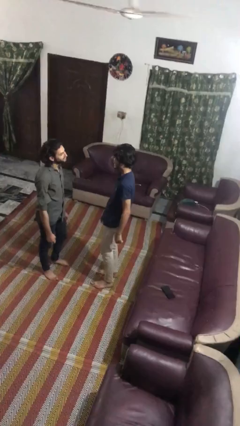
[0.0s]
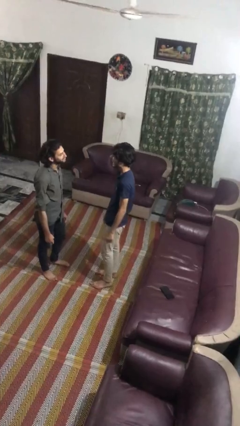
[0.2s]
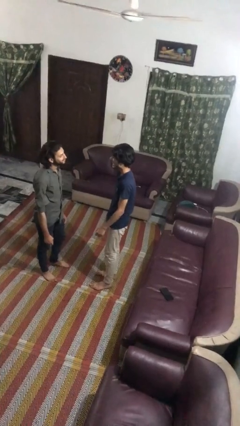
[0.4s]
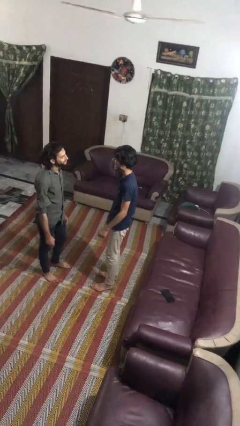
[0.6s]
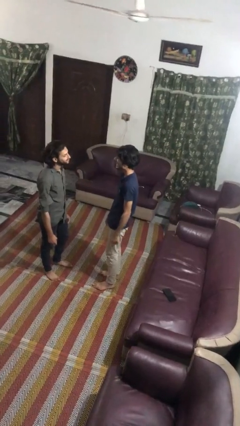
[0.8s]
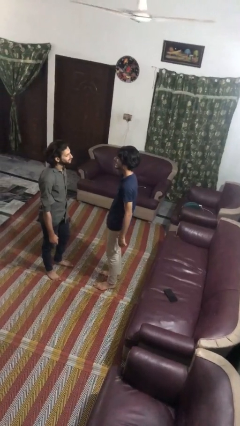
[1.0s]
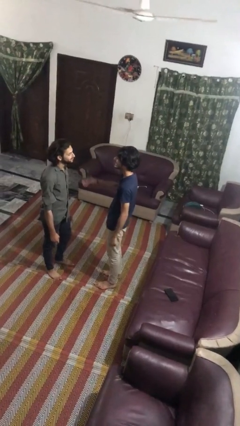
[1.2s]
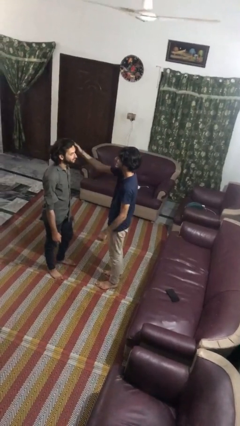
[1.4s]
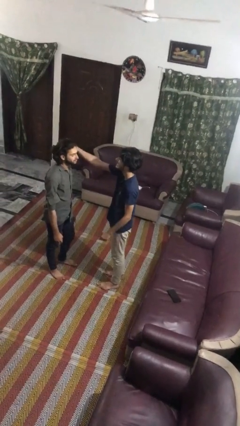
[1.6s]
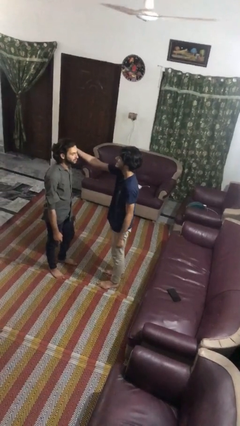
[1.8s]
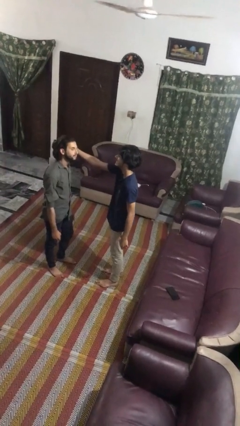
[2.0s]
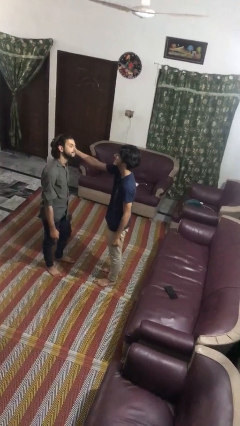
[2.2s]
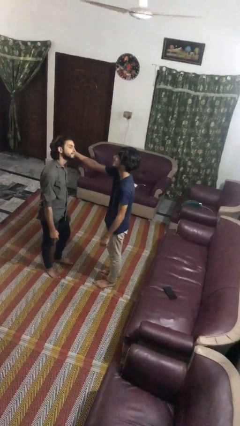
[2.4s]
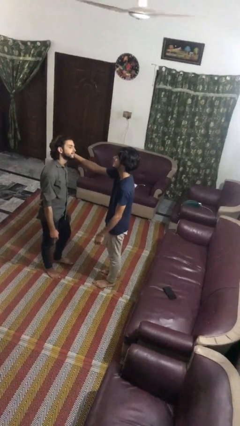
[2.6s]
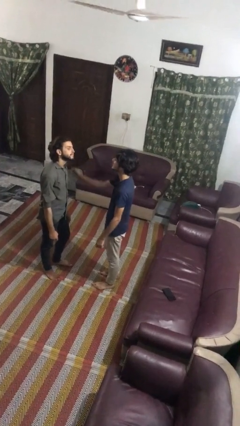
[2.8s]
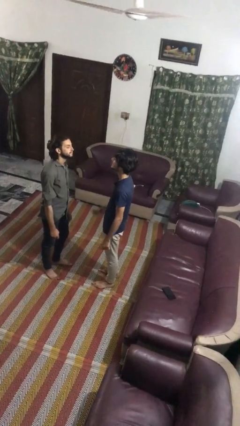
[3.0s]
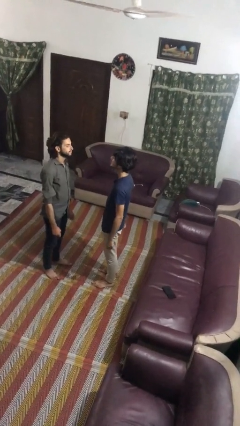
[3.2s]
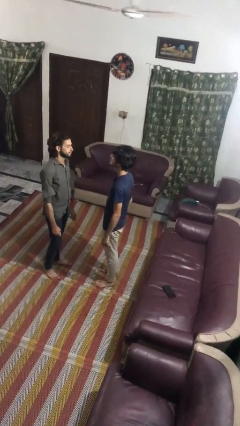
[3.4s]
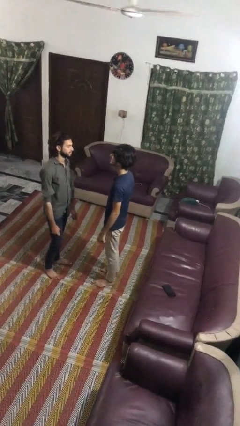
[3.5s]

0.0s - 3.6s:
person grabs person by hair

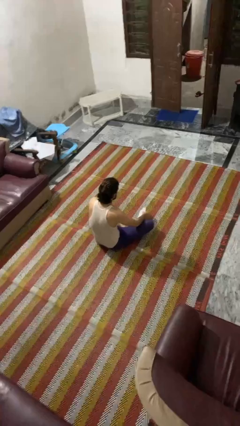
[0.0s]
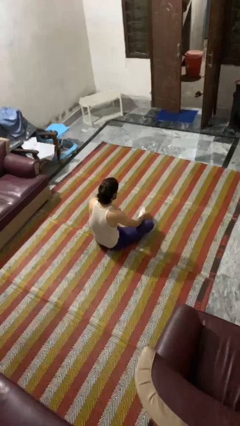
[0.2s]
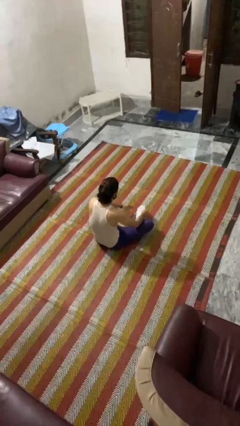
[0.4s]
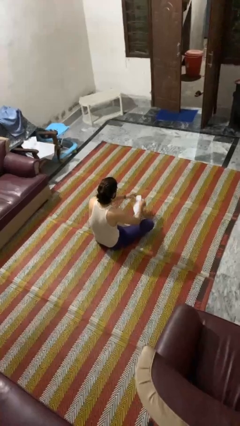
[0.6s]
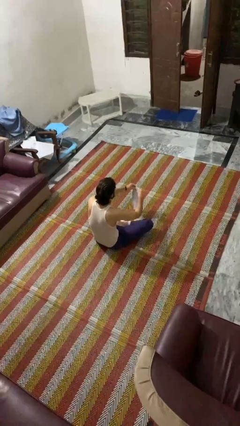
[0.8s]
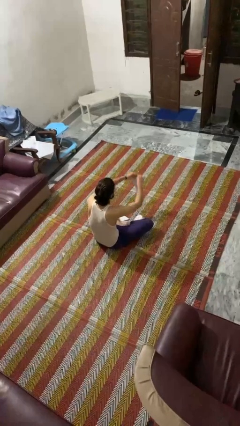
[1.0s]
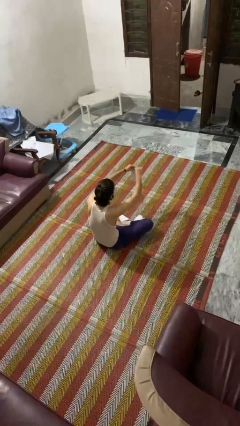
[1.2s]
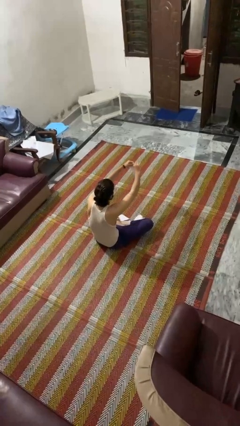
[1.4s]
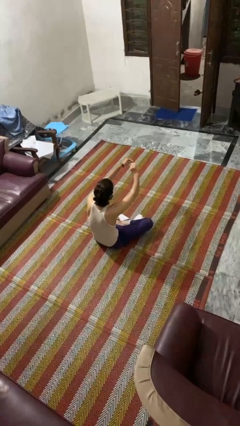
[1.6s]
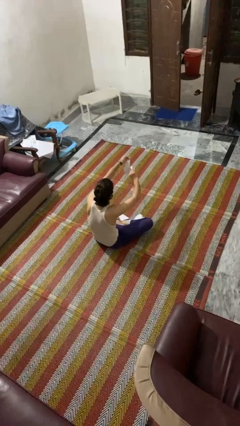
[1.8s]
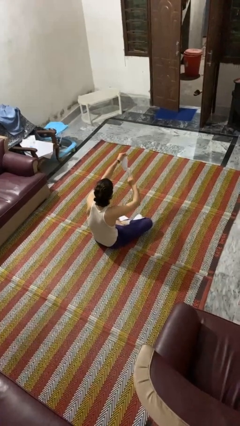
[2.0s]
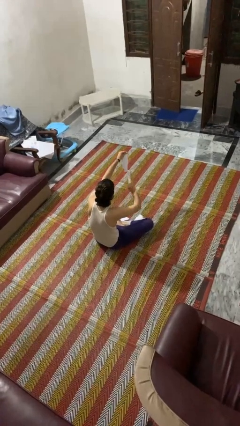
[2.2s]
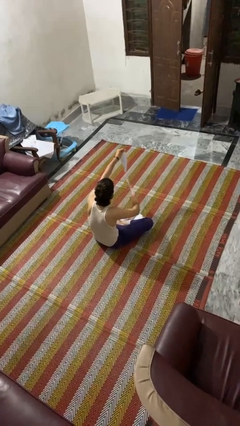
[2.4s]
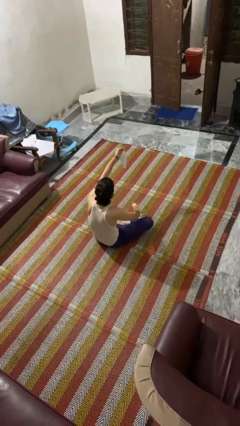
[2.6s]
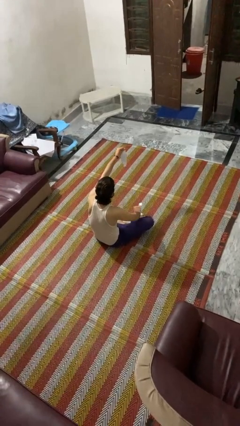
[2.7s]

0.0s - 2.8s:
person tears paper

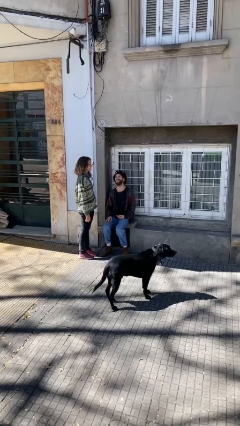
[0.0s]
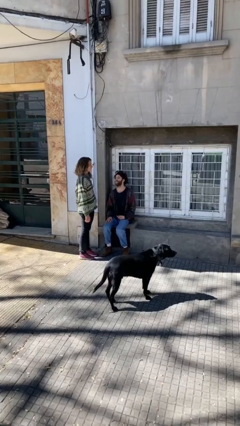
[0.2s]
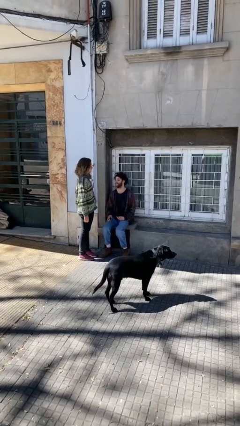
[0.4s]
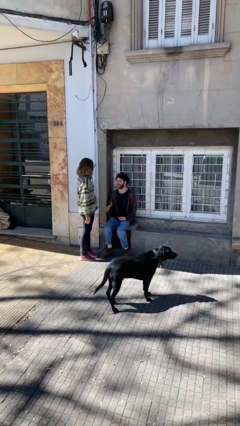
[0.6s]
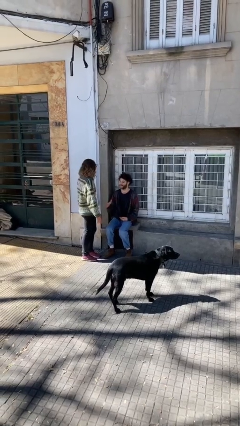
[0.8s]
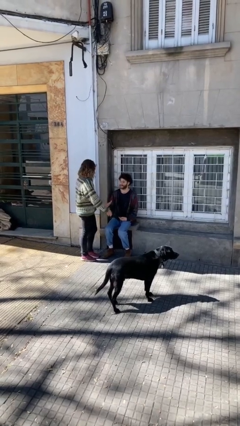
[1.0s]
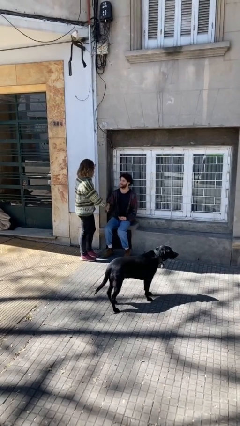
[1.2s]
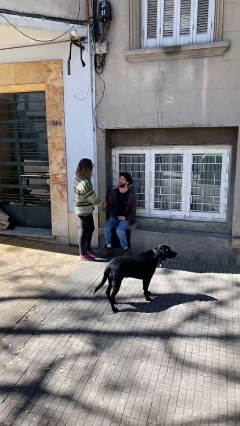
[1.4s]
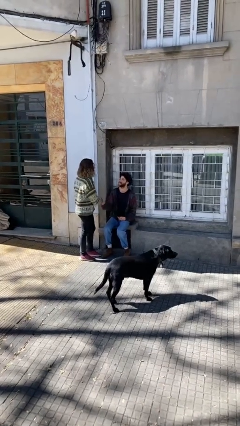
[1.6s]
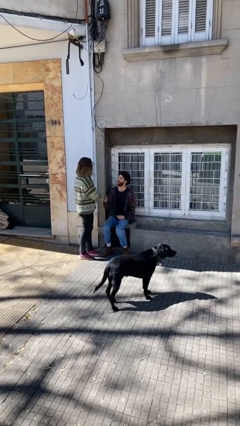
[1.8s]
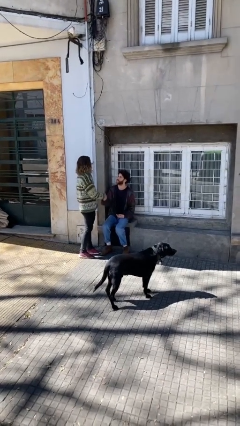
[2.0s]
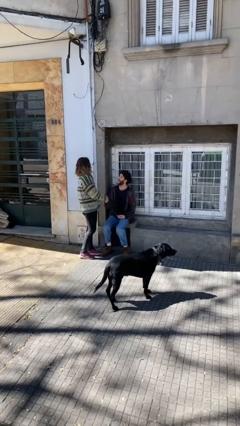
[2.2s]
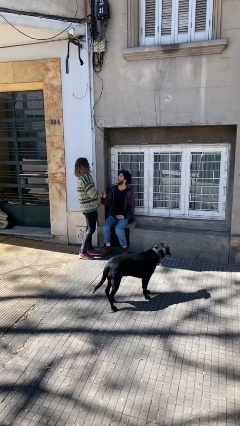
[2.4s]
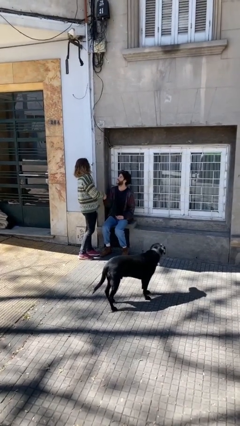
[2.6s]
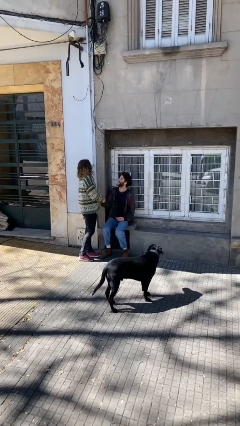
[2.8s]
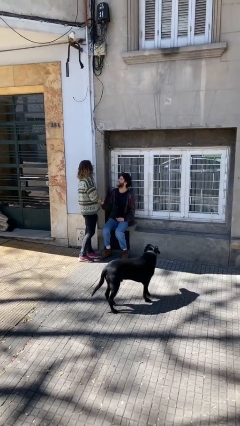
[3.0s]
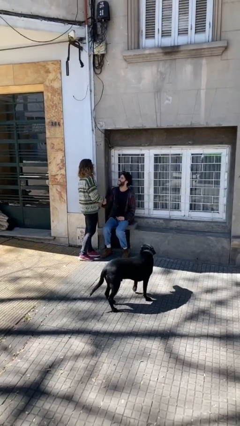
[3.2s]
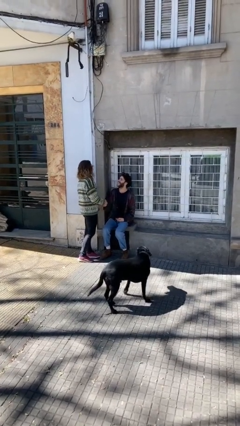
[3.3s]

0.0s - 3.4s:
person shakes hand

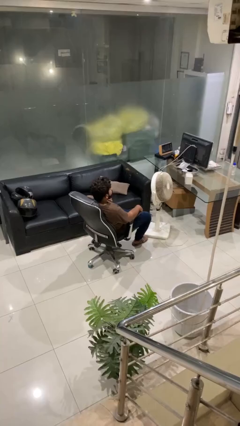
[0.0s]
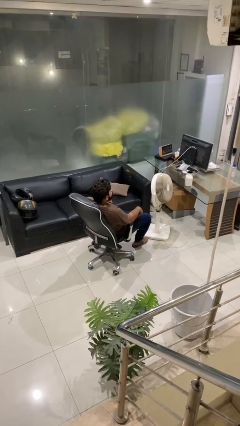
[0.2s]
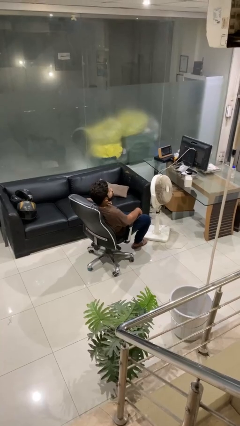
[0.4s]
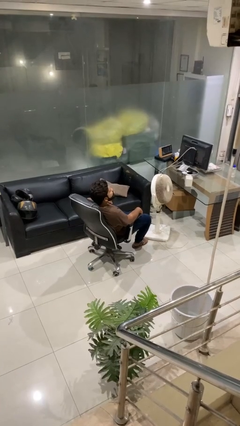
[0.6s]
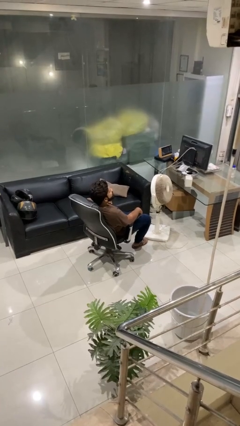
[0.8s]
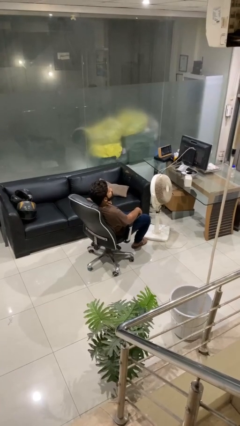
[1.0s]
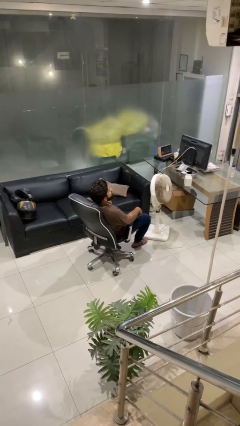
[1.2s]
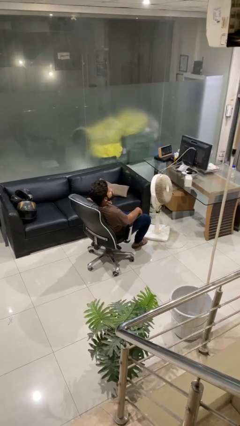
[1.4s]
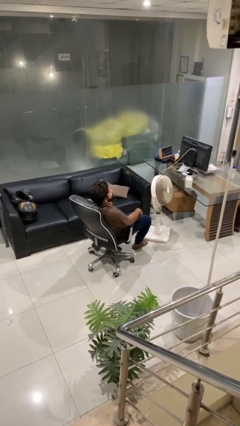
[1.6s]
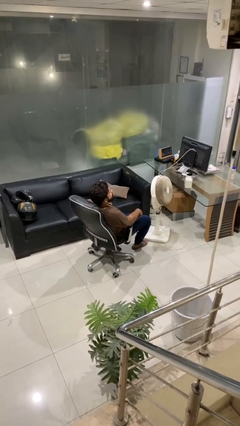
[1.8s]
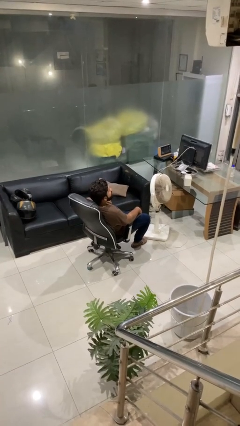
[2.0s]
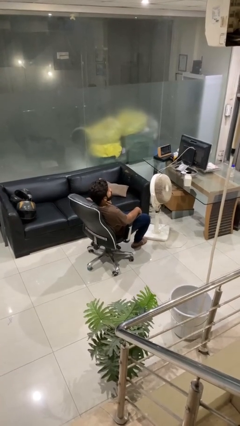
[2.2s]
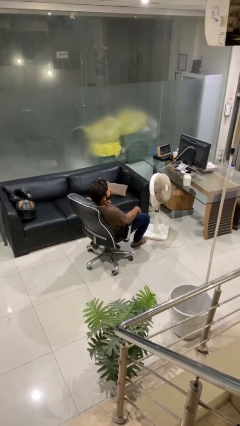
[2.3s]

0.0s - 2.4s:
person sticks out tongue

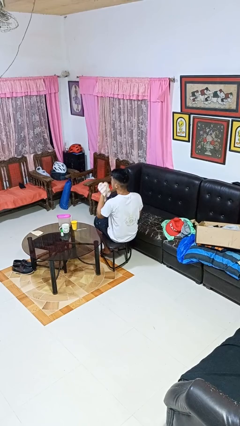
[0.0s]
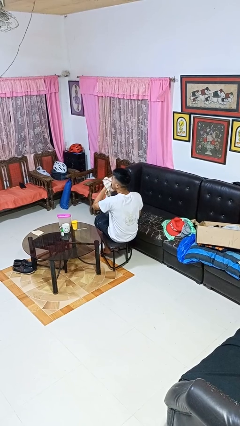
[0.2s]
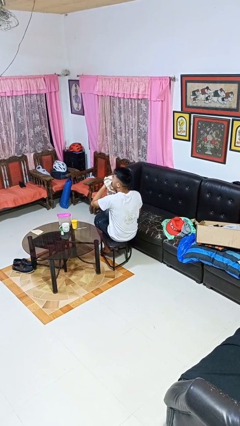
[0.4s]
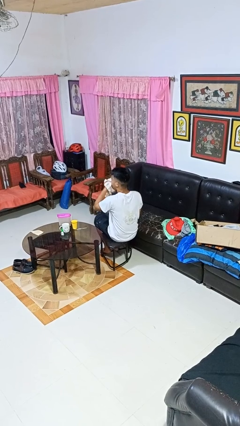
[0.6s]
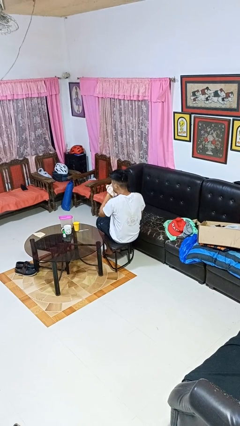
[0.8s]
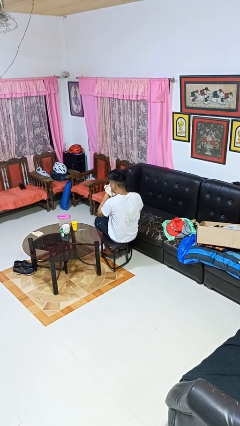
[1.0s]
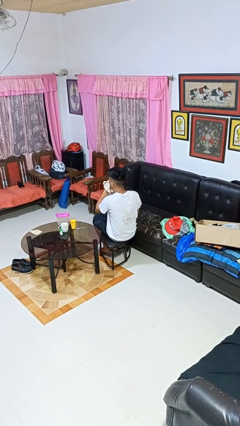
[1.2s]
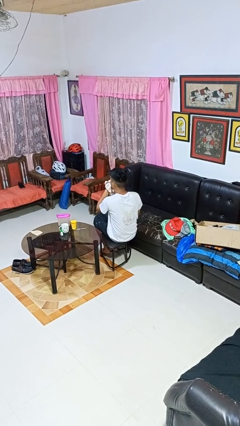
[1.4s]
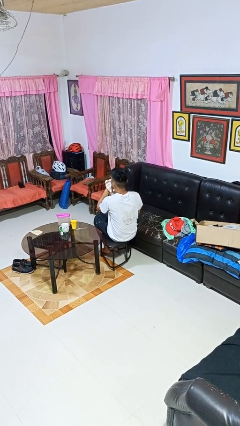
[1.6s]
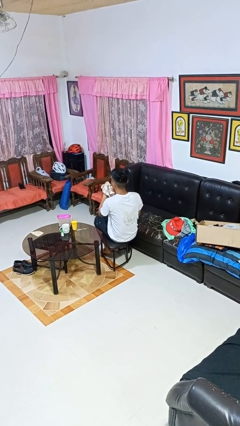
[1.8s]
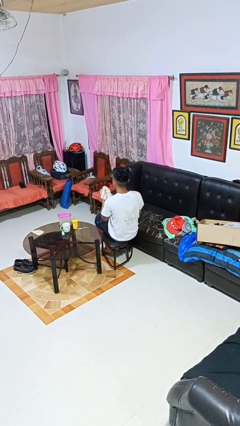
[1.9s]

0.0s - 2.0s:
person blows nose

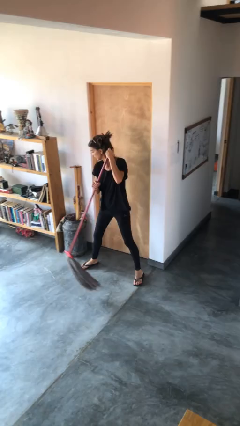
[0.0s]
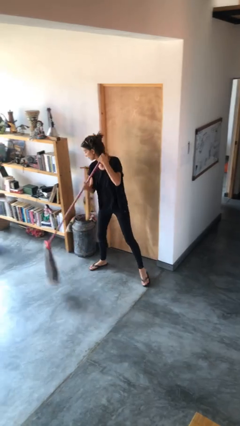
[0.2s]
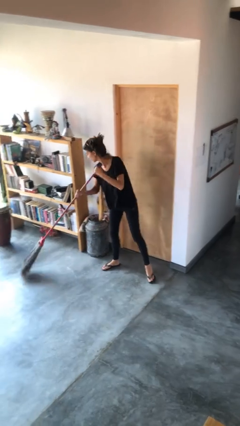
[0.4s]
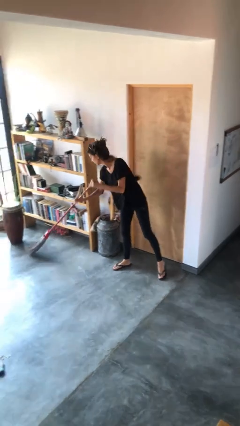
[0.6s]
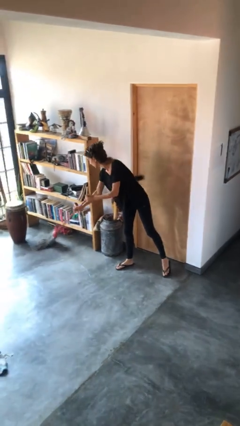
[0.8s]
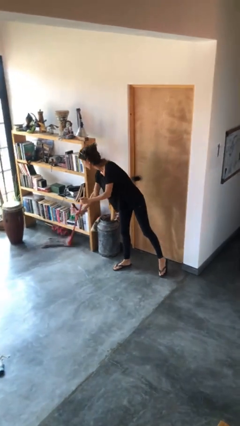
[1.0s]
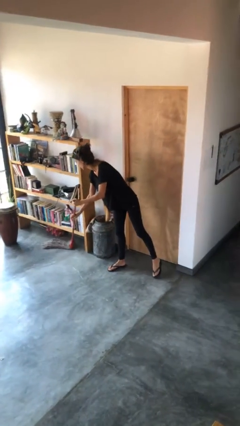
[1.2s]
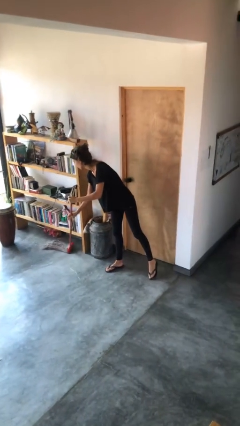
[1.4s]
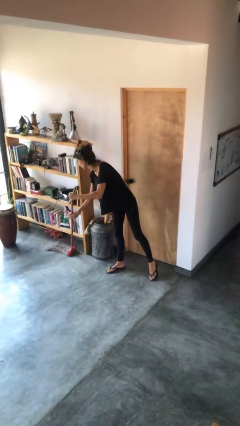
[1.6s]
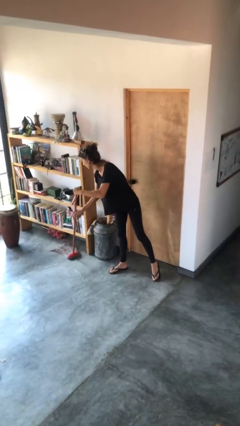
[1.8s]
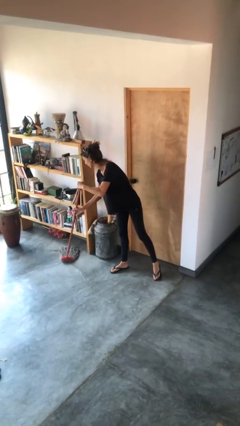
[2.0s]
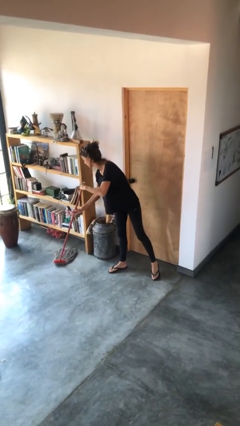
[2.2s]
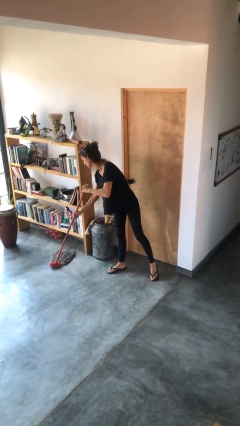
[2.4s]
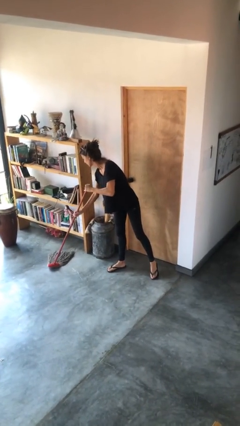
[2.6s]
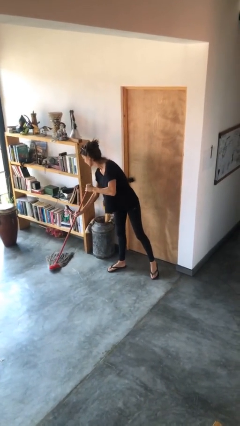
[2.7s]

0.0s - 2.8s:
person mops

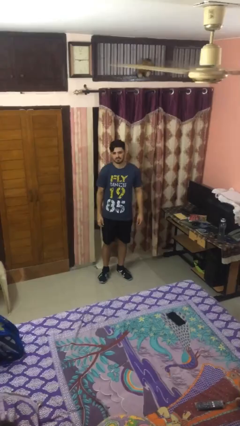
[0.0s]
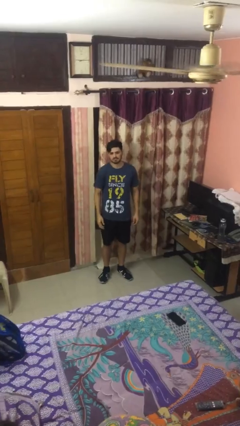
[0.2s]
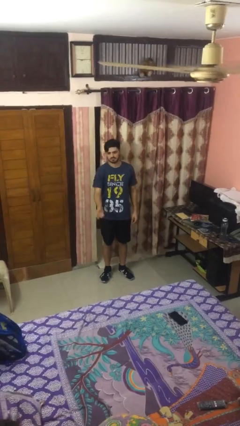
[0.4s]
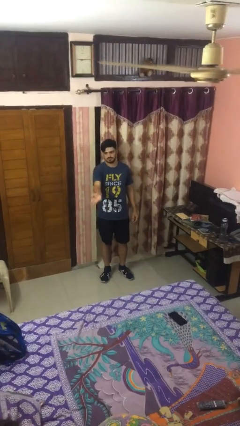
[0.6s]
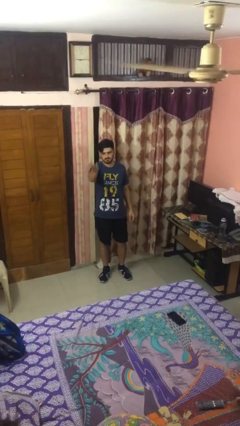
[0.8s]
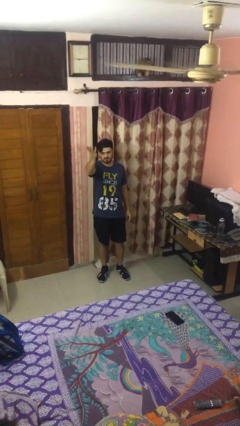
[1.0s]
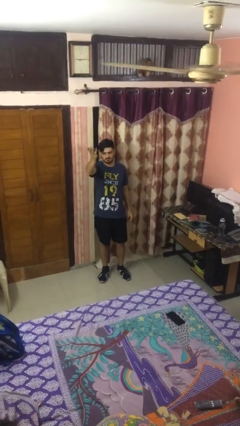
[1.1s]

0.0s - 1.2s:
person gestures swipe up
